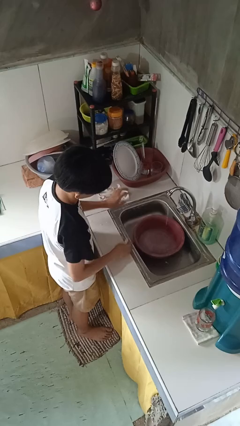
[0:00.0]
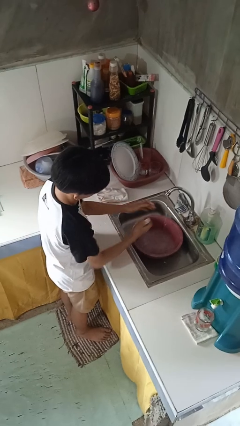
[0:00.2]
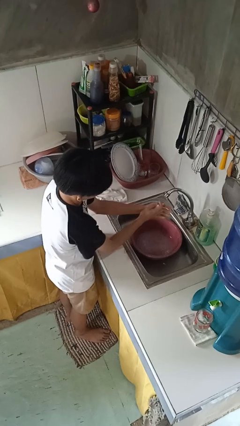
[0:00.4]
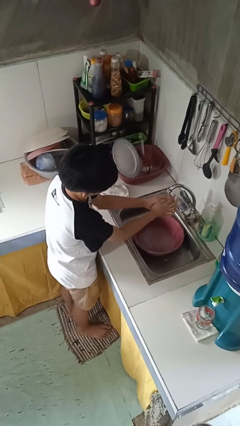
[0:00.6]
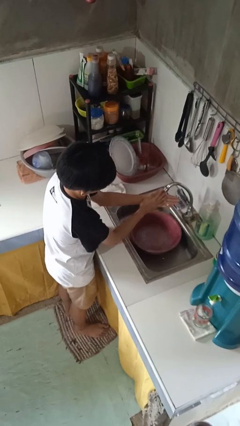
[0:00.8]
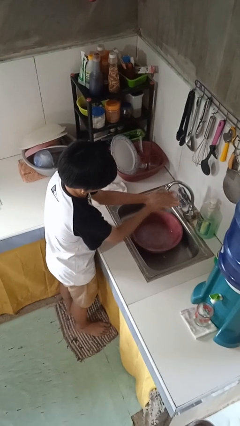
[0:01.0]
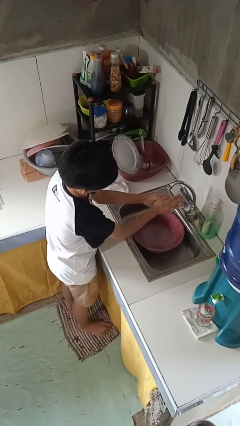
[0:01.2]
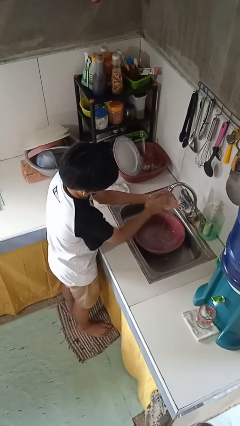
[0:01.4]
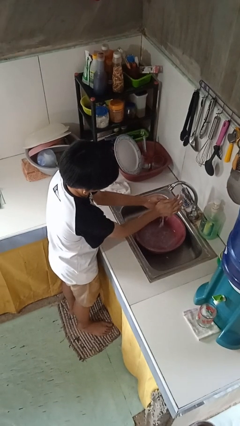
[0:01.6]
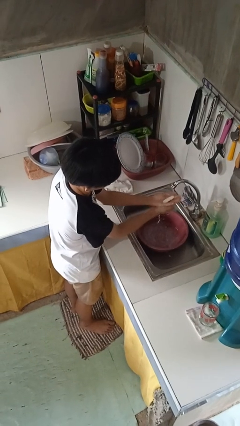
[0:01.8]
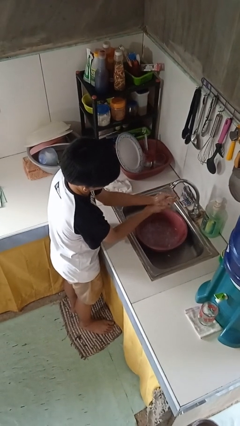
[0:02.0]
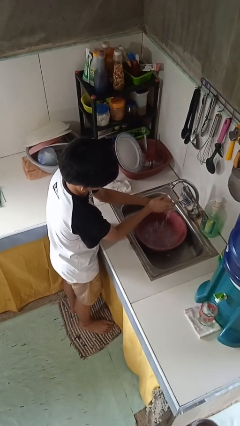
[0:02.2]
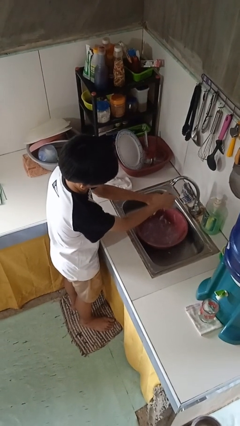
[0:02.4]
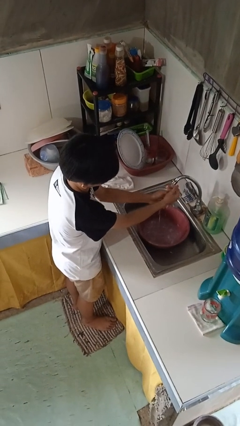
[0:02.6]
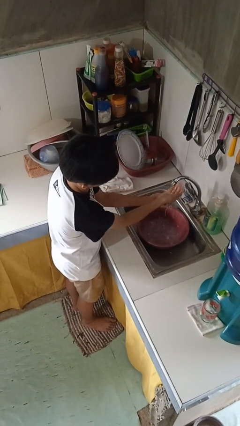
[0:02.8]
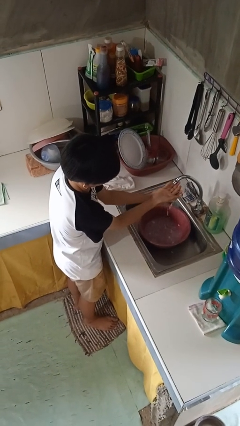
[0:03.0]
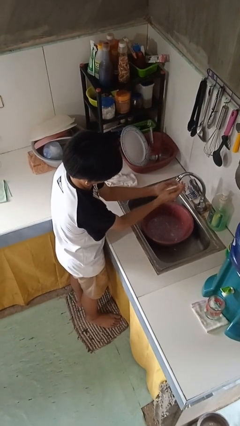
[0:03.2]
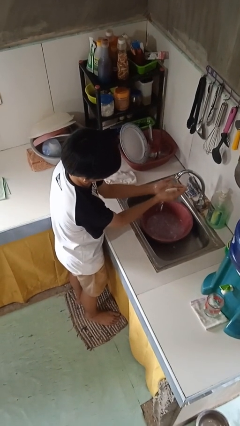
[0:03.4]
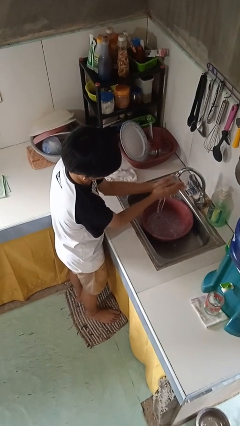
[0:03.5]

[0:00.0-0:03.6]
person washes hands

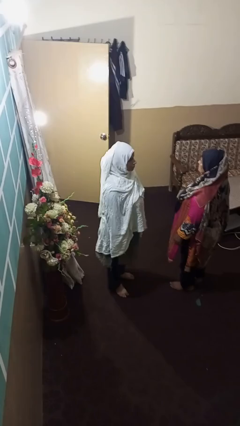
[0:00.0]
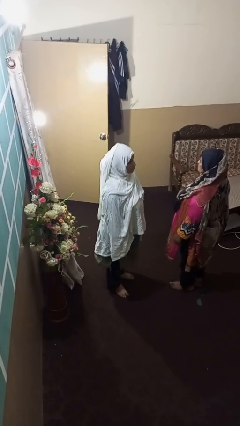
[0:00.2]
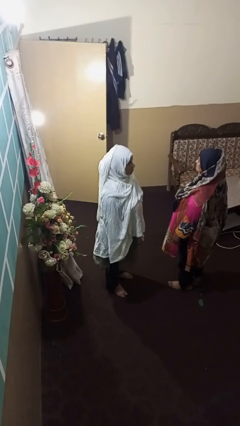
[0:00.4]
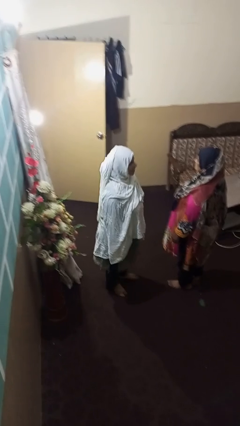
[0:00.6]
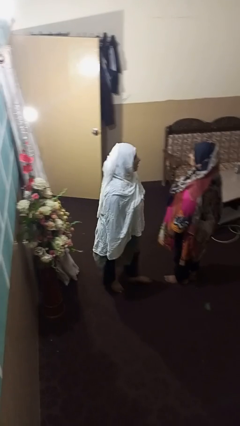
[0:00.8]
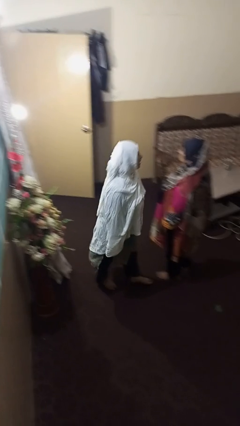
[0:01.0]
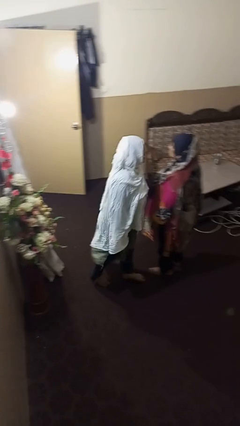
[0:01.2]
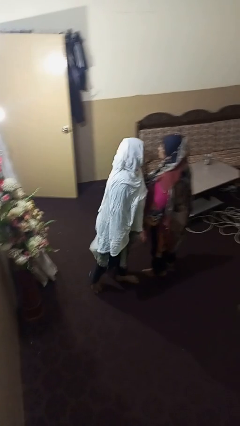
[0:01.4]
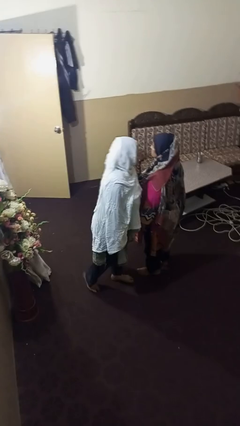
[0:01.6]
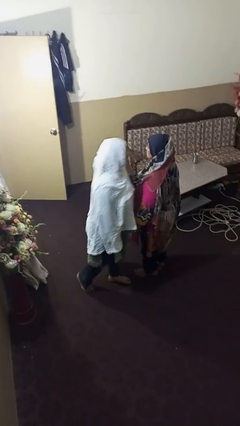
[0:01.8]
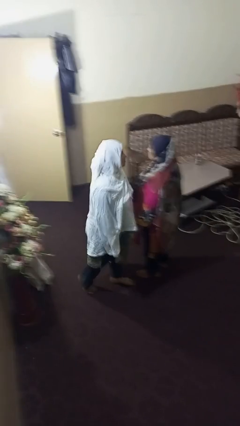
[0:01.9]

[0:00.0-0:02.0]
person laughs with person

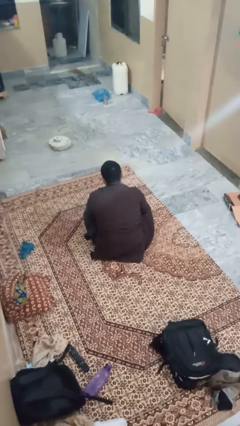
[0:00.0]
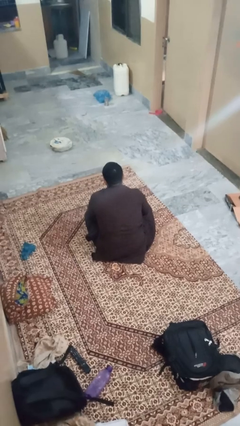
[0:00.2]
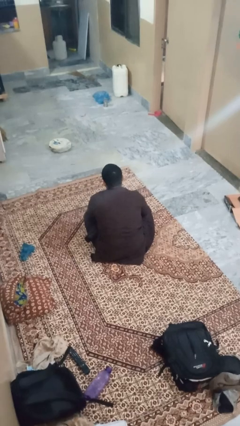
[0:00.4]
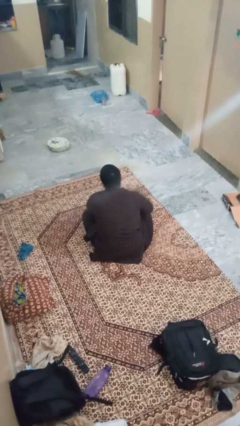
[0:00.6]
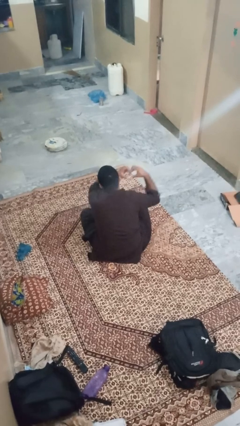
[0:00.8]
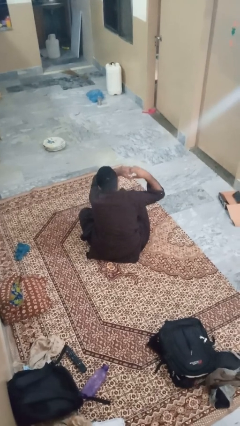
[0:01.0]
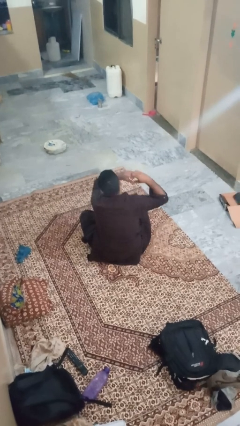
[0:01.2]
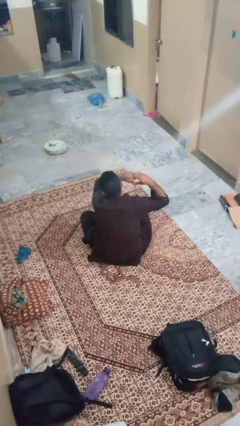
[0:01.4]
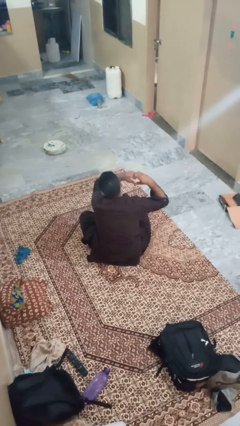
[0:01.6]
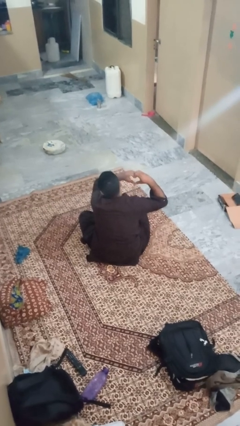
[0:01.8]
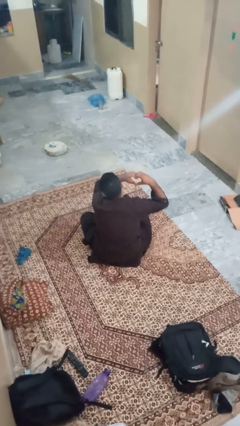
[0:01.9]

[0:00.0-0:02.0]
person gestures heart

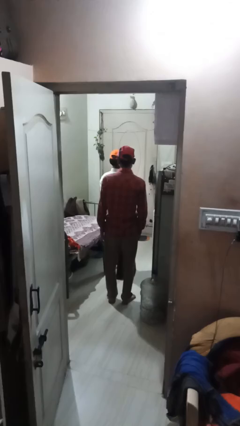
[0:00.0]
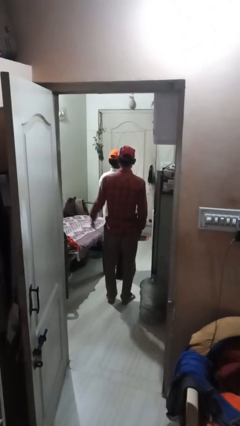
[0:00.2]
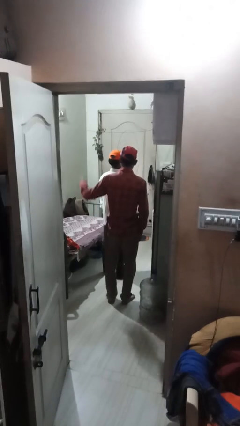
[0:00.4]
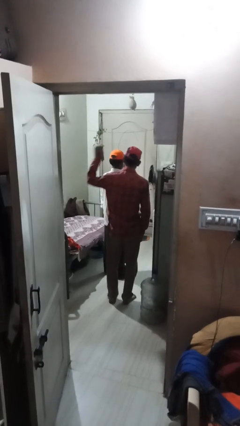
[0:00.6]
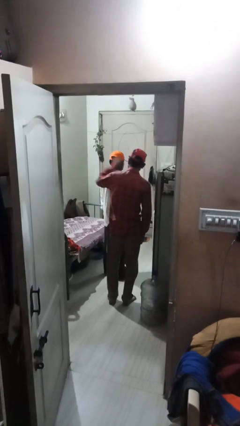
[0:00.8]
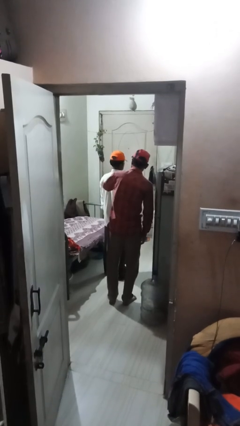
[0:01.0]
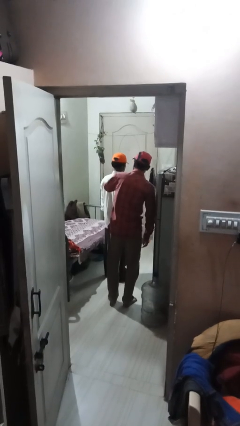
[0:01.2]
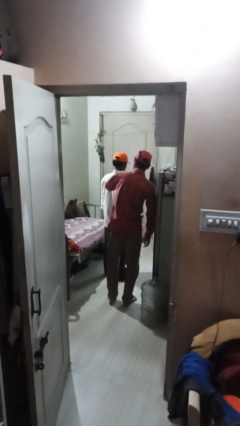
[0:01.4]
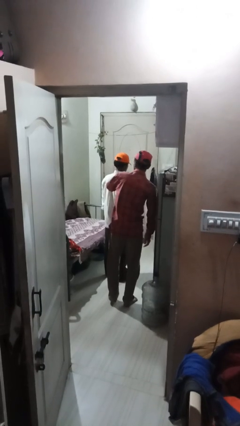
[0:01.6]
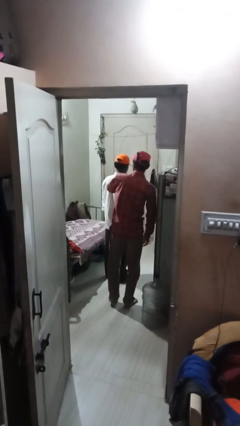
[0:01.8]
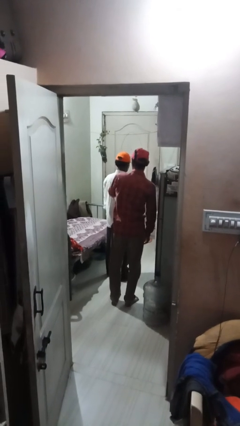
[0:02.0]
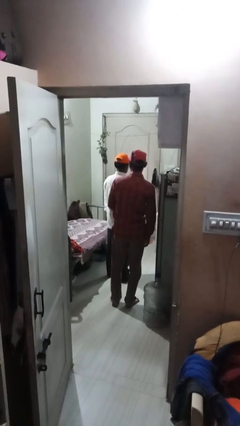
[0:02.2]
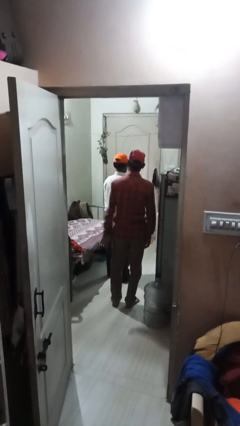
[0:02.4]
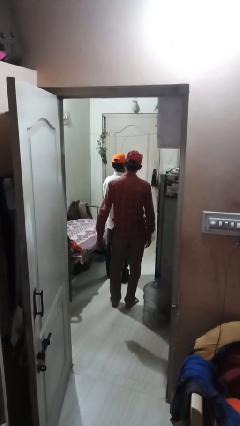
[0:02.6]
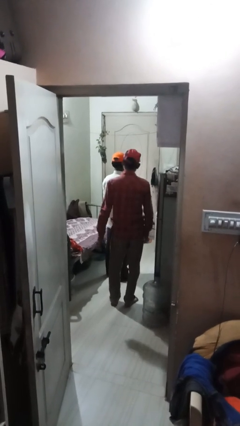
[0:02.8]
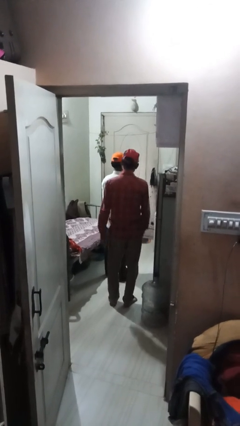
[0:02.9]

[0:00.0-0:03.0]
person touches back of person

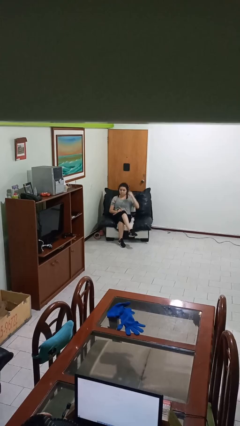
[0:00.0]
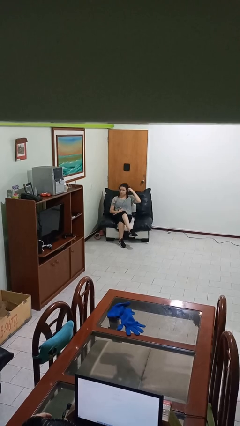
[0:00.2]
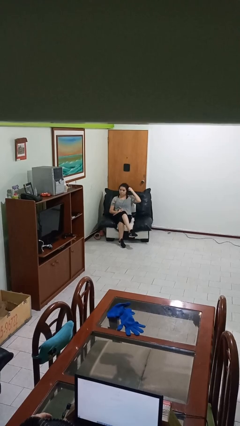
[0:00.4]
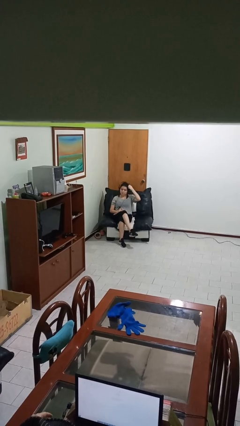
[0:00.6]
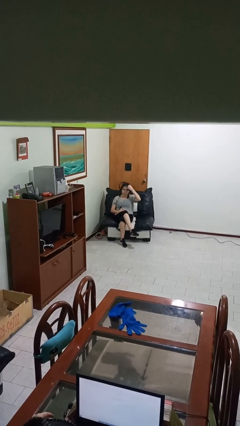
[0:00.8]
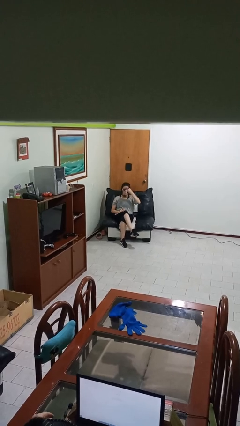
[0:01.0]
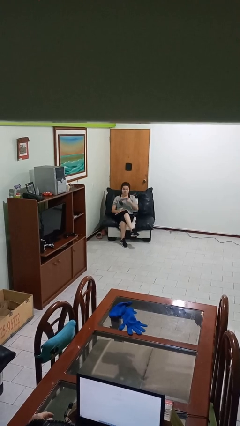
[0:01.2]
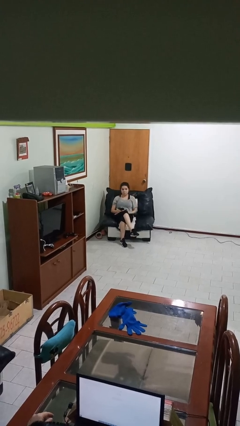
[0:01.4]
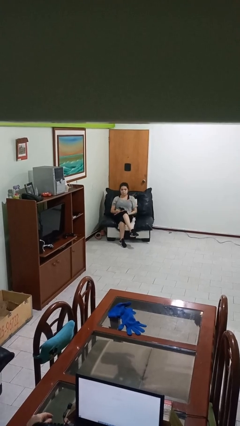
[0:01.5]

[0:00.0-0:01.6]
person takes off headphones

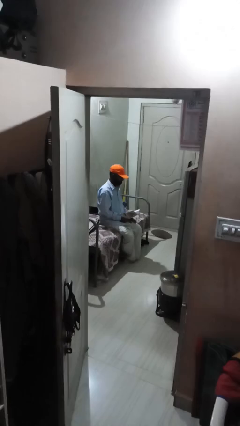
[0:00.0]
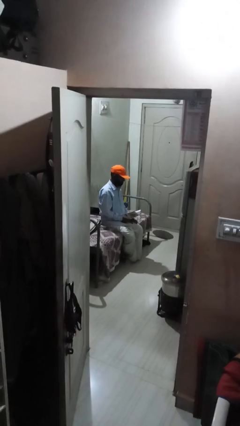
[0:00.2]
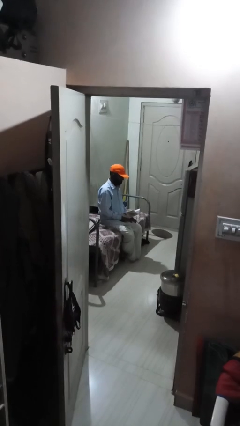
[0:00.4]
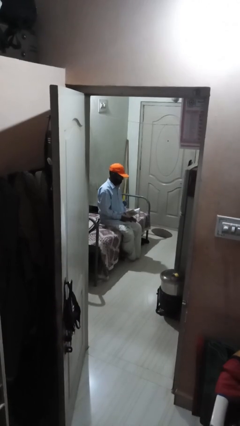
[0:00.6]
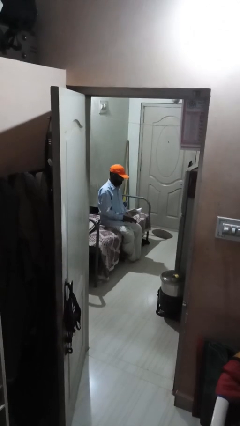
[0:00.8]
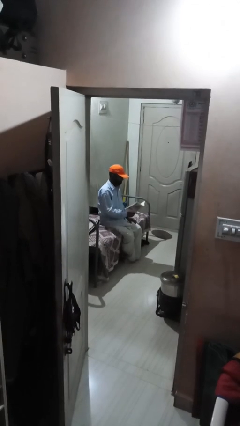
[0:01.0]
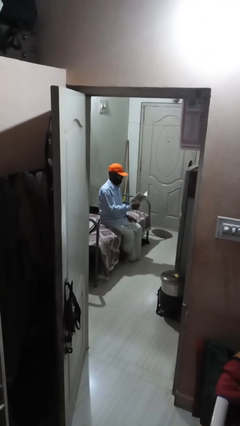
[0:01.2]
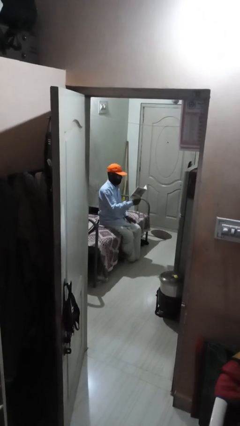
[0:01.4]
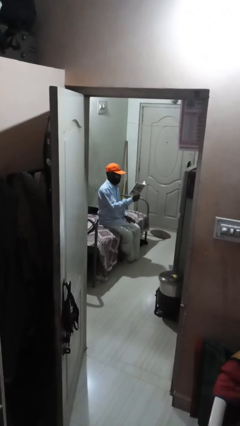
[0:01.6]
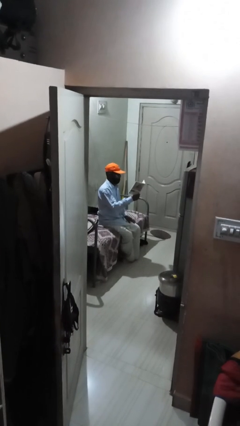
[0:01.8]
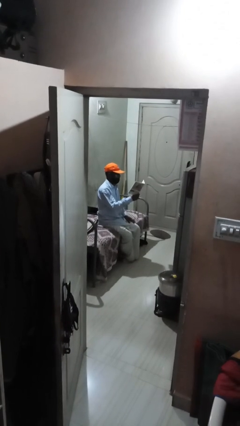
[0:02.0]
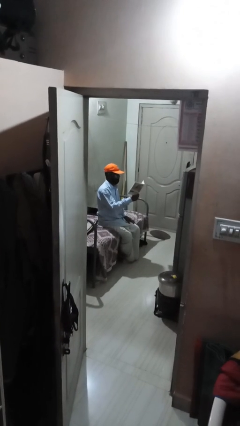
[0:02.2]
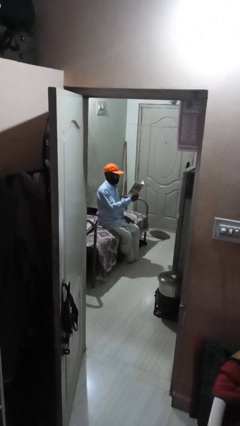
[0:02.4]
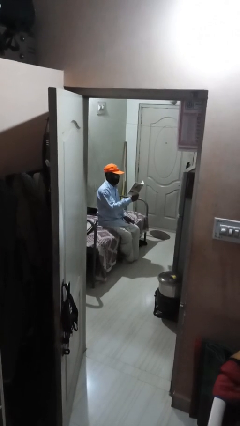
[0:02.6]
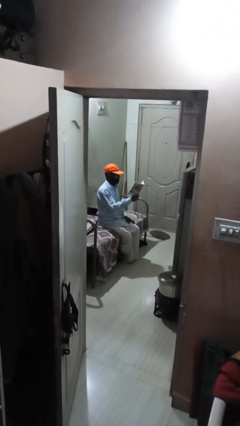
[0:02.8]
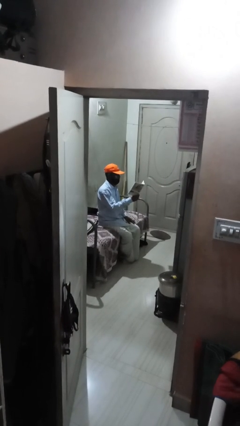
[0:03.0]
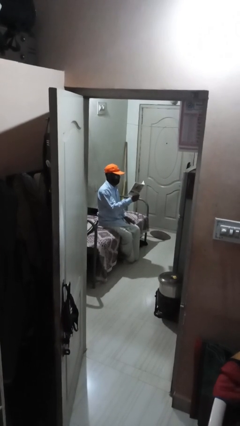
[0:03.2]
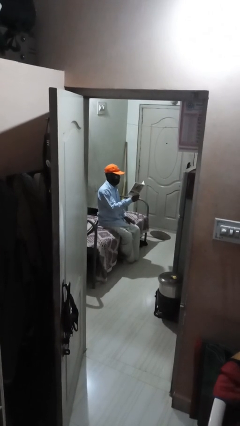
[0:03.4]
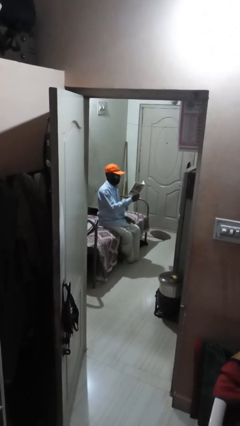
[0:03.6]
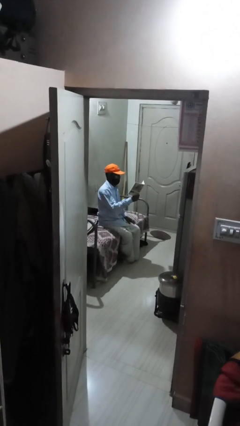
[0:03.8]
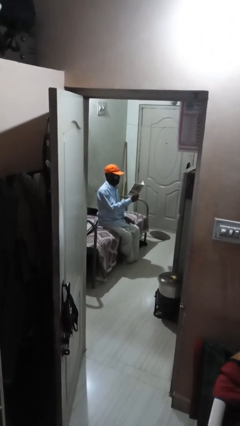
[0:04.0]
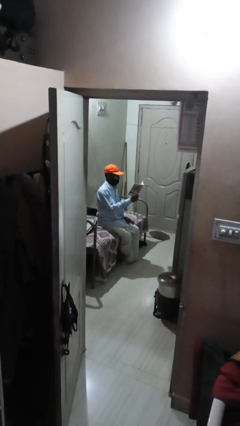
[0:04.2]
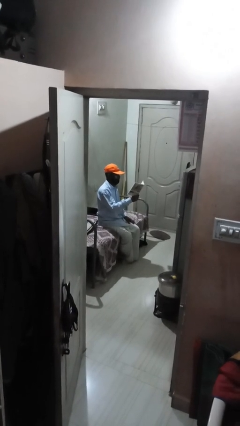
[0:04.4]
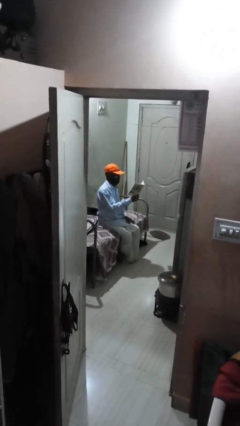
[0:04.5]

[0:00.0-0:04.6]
person reads document

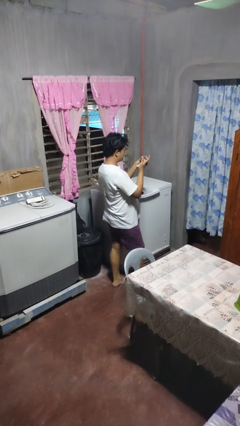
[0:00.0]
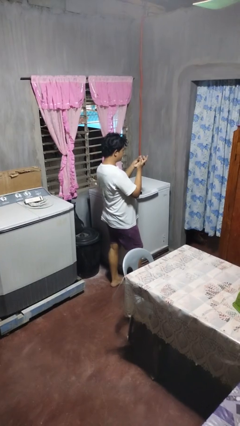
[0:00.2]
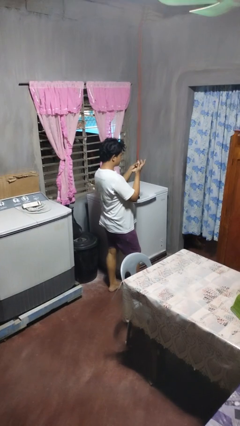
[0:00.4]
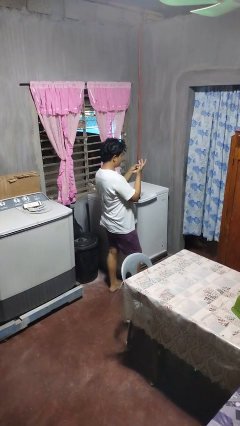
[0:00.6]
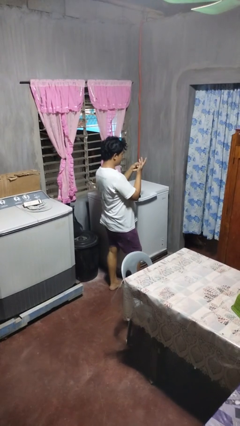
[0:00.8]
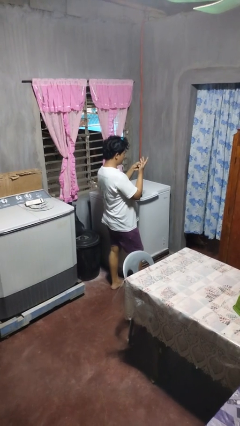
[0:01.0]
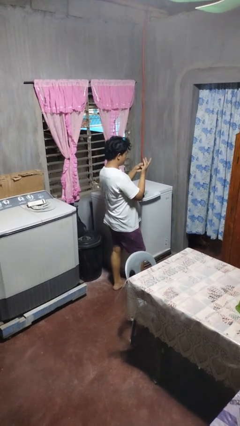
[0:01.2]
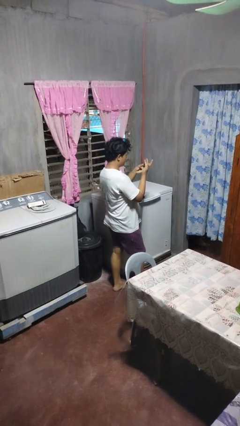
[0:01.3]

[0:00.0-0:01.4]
person puts on ring
